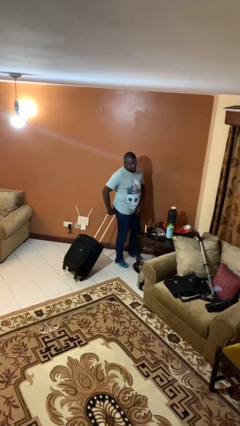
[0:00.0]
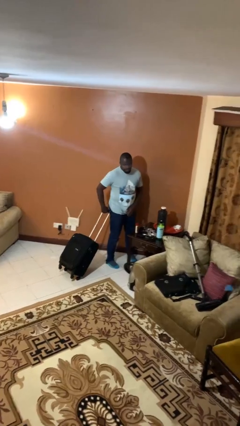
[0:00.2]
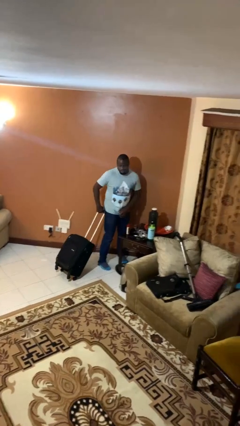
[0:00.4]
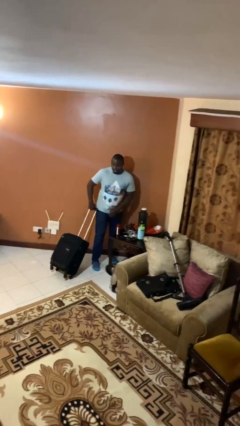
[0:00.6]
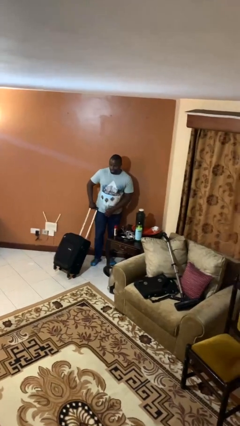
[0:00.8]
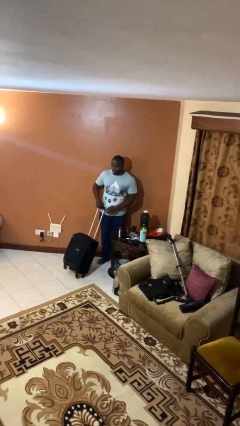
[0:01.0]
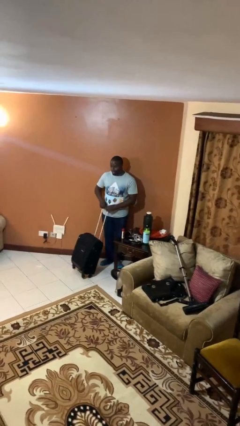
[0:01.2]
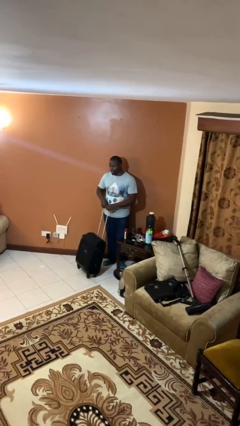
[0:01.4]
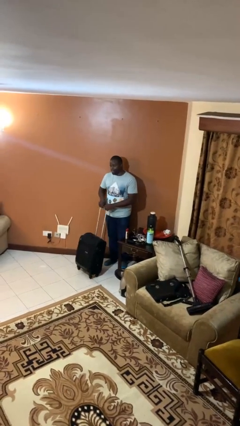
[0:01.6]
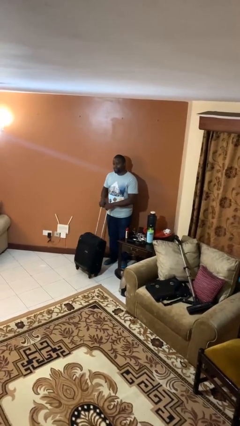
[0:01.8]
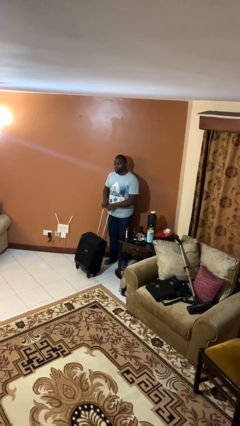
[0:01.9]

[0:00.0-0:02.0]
person pulls wheeled cart

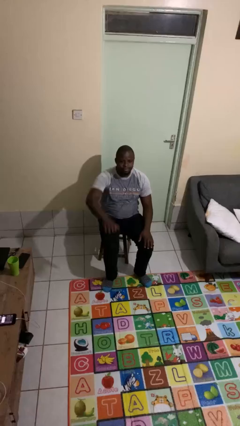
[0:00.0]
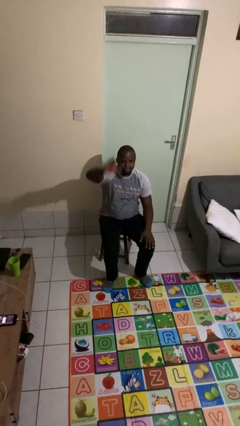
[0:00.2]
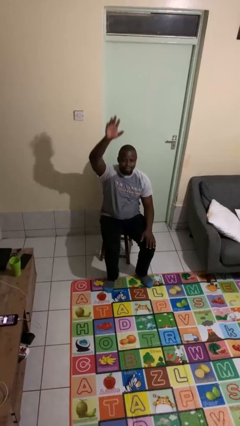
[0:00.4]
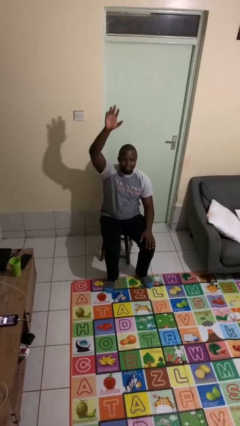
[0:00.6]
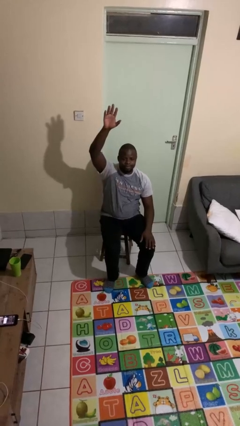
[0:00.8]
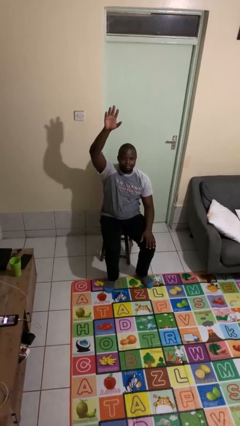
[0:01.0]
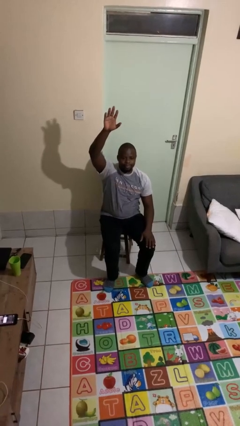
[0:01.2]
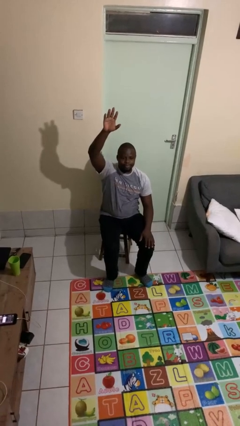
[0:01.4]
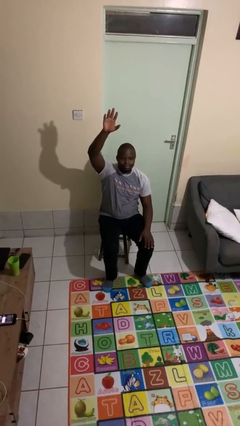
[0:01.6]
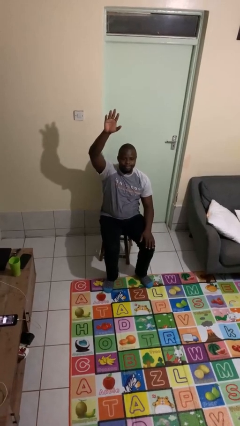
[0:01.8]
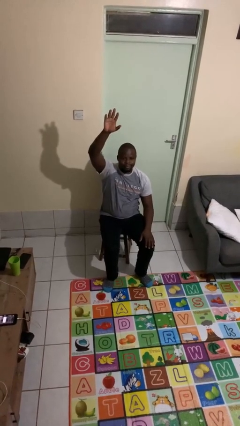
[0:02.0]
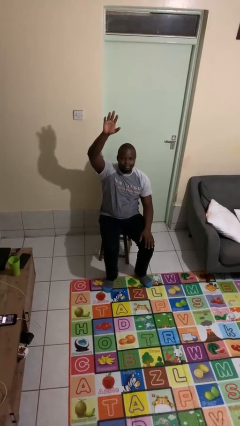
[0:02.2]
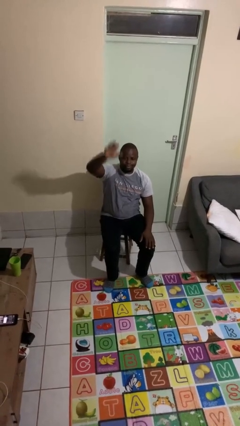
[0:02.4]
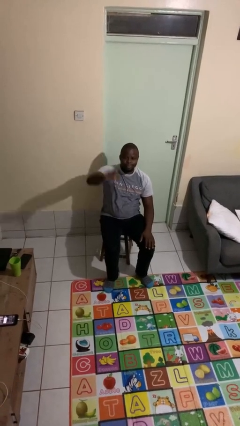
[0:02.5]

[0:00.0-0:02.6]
person gestures raise hand

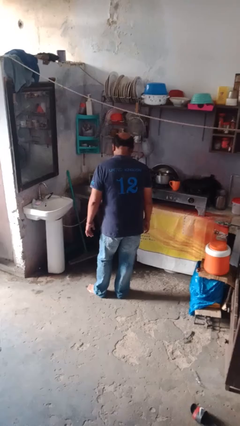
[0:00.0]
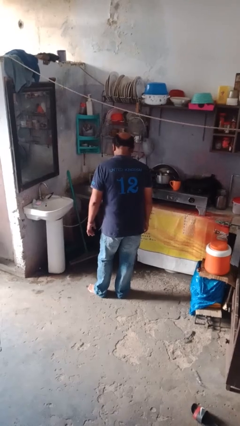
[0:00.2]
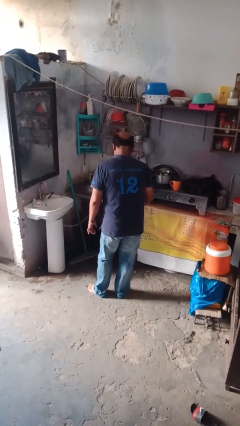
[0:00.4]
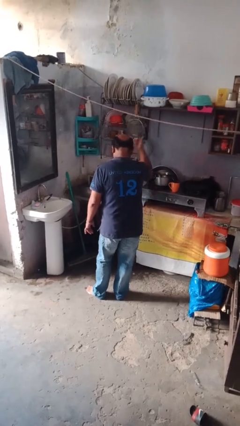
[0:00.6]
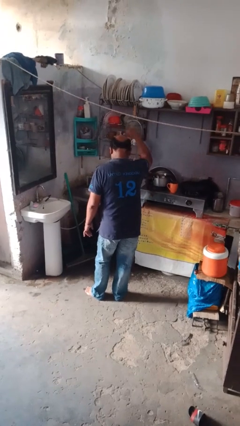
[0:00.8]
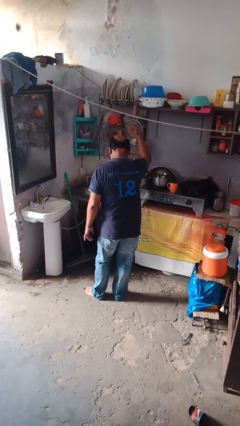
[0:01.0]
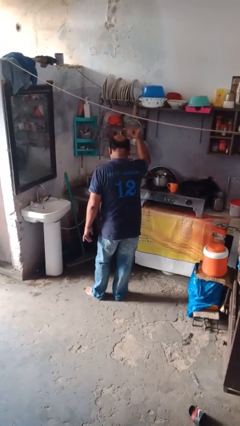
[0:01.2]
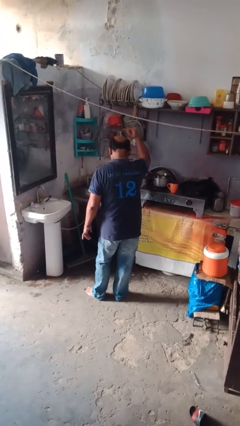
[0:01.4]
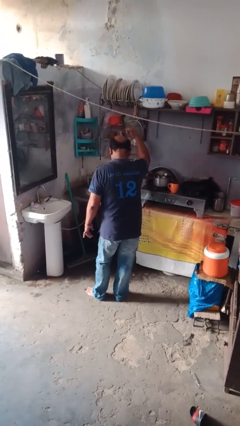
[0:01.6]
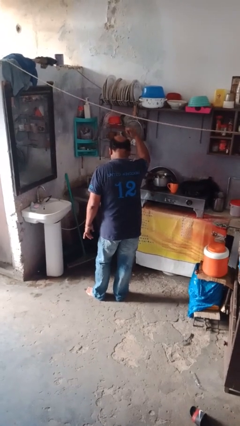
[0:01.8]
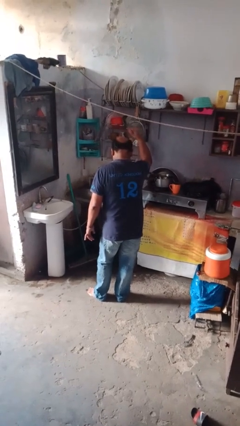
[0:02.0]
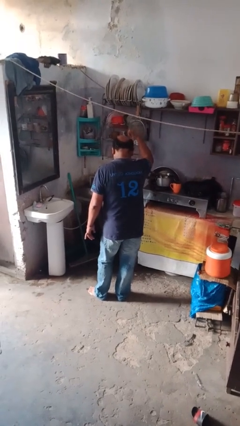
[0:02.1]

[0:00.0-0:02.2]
person gestures hang loose

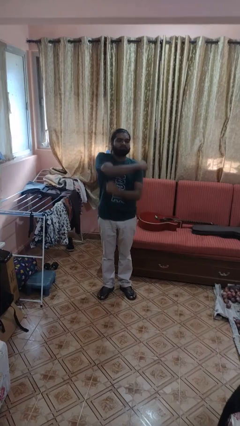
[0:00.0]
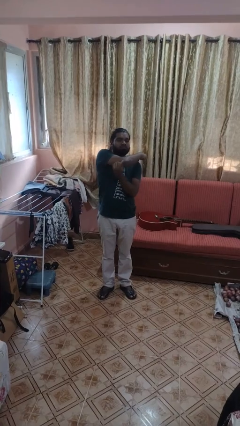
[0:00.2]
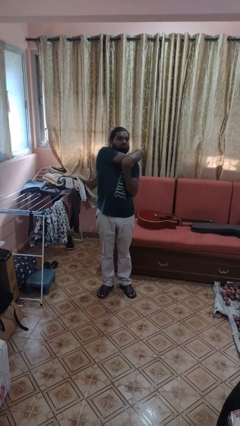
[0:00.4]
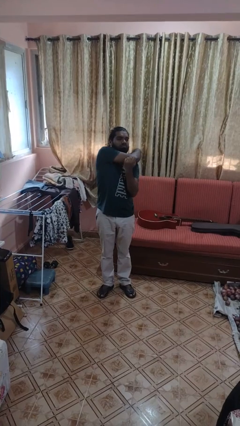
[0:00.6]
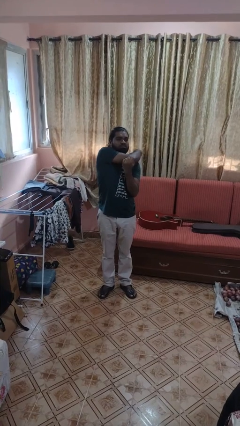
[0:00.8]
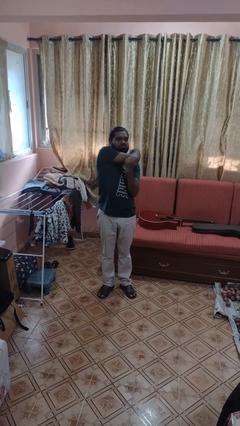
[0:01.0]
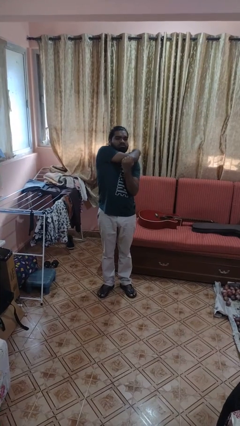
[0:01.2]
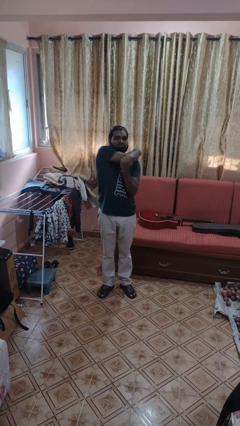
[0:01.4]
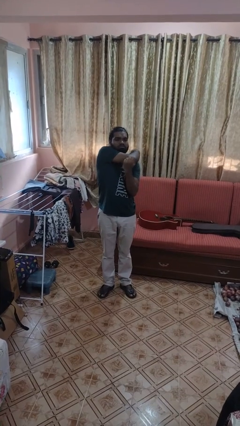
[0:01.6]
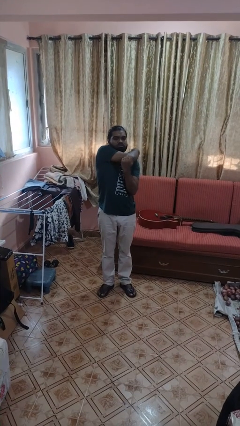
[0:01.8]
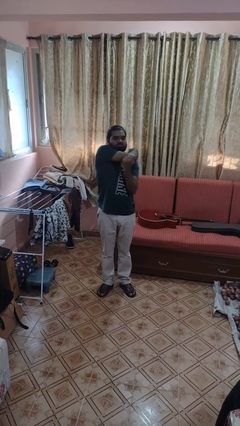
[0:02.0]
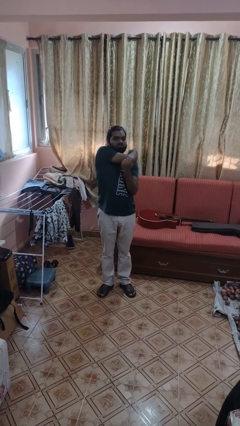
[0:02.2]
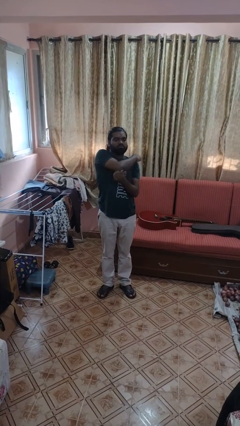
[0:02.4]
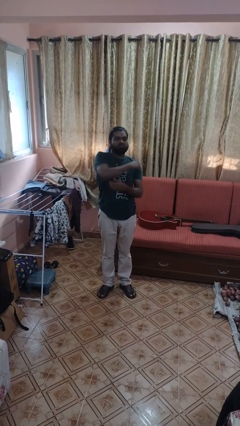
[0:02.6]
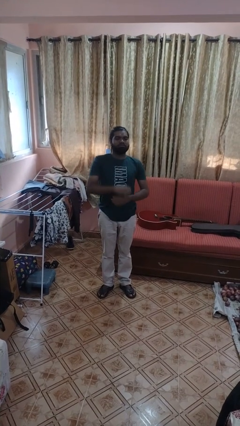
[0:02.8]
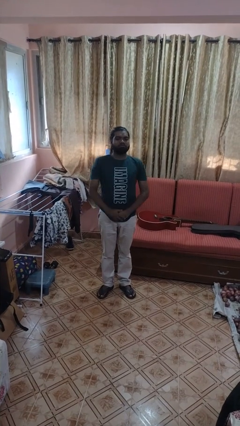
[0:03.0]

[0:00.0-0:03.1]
person stretches arms to side

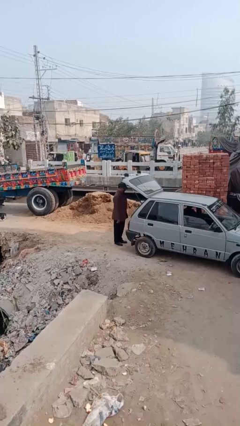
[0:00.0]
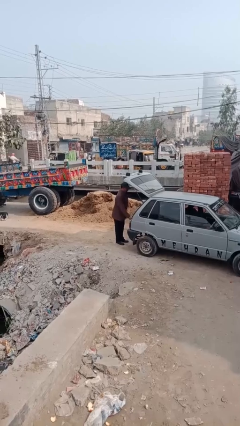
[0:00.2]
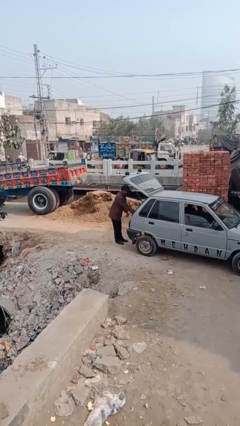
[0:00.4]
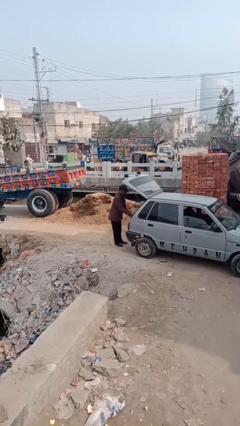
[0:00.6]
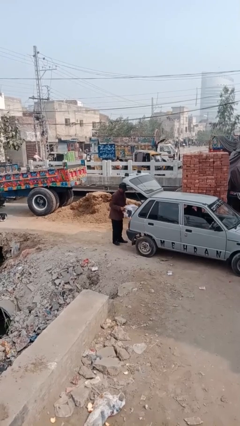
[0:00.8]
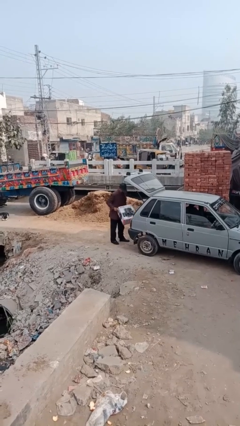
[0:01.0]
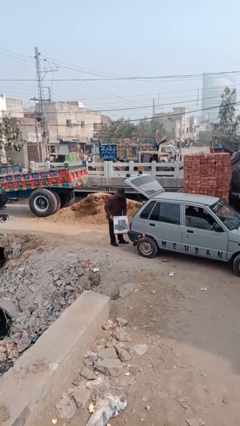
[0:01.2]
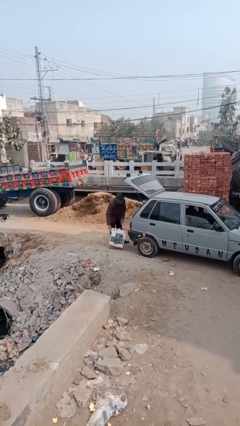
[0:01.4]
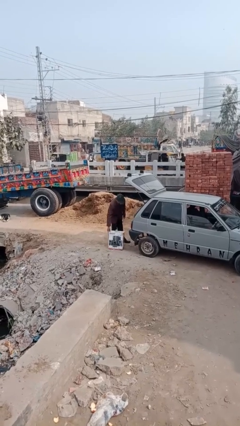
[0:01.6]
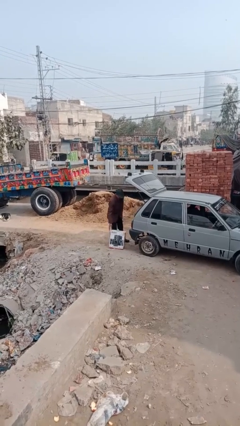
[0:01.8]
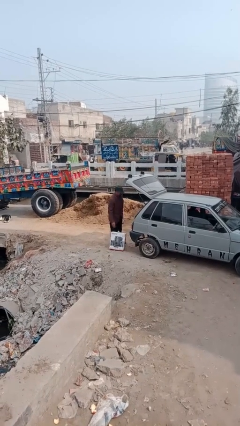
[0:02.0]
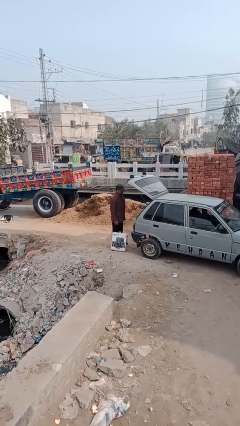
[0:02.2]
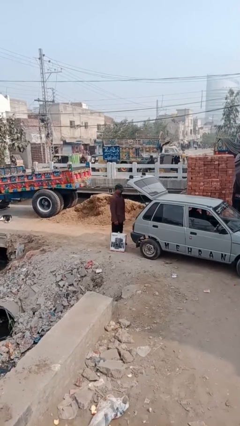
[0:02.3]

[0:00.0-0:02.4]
person unloads car

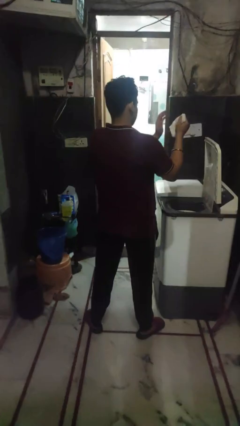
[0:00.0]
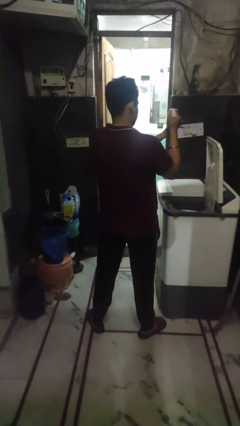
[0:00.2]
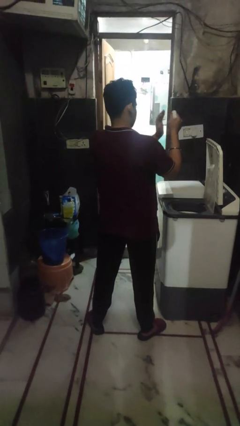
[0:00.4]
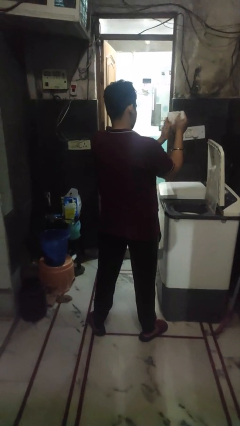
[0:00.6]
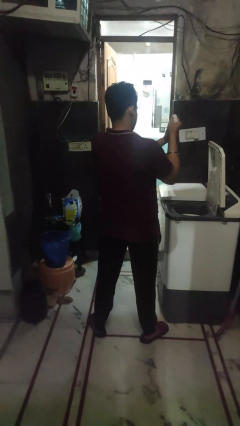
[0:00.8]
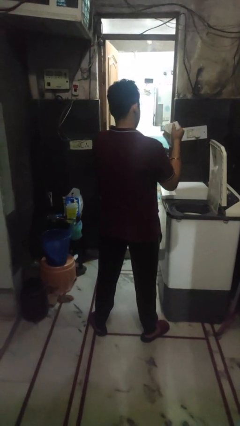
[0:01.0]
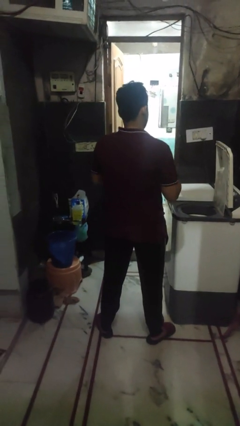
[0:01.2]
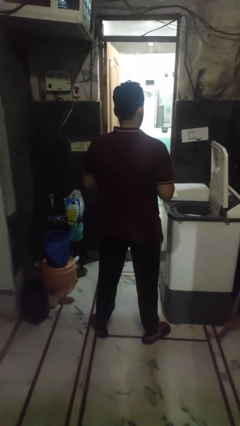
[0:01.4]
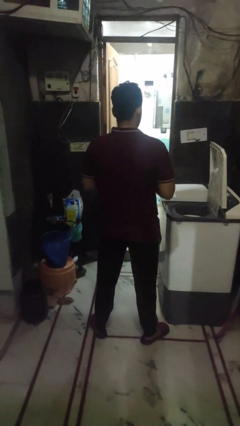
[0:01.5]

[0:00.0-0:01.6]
person cleans dryer lint trap

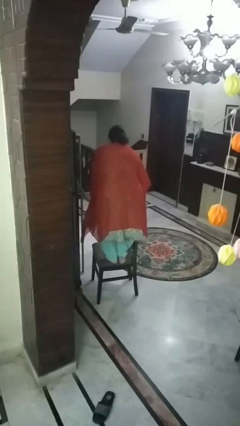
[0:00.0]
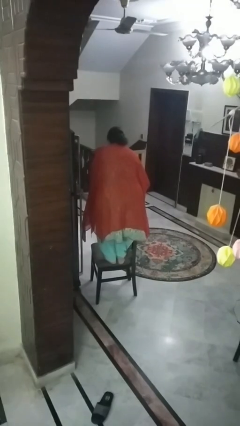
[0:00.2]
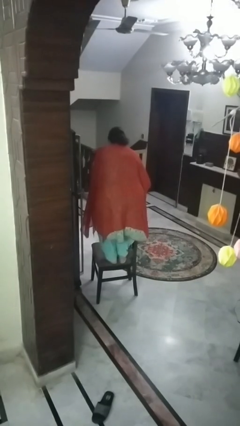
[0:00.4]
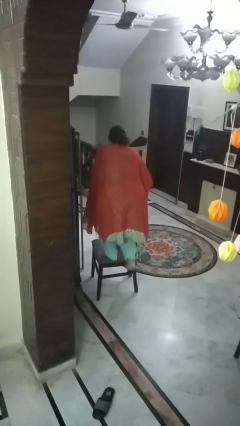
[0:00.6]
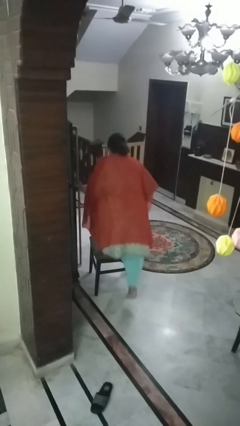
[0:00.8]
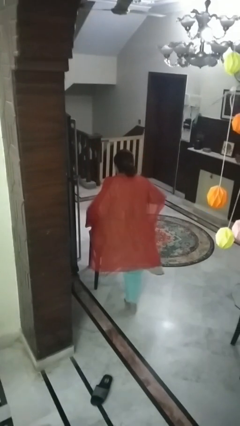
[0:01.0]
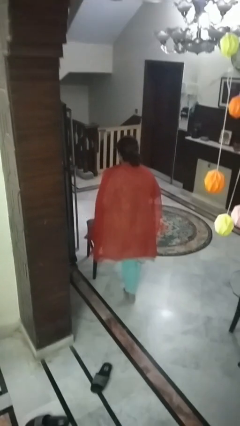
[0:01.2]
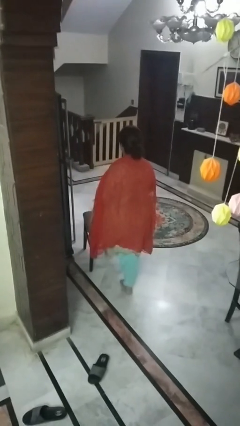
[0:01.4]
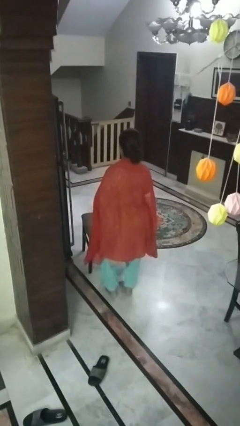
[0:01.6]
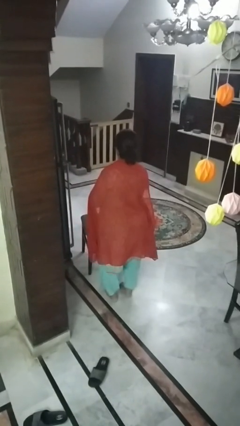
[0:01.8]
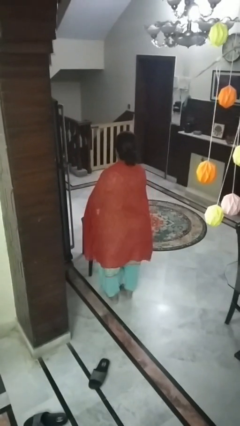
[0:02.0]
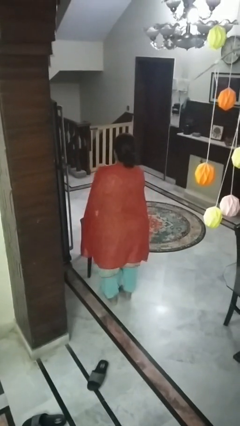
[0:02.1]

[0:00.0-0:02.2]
person climbs off chair

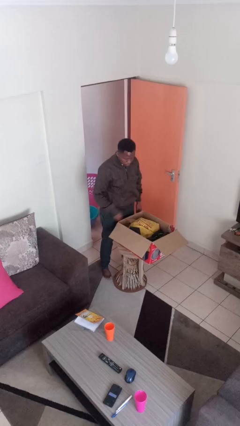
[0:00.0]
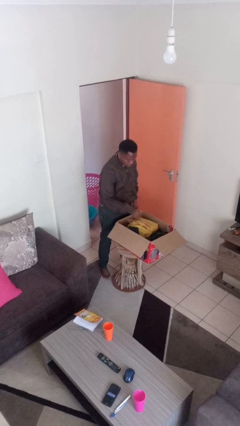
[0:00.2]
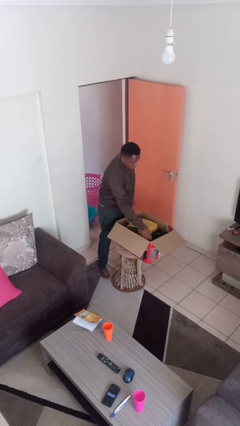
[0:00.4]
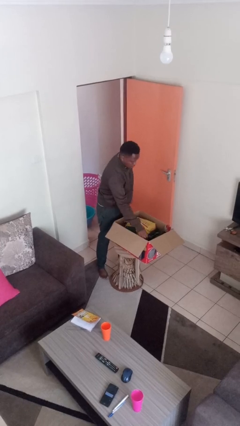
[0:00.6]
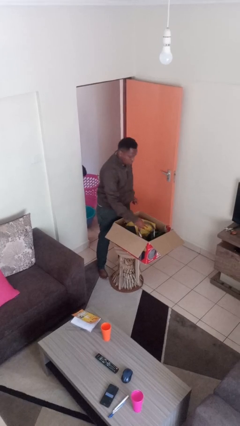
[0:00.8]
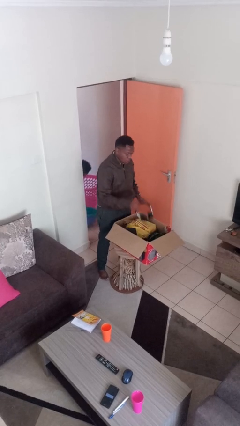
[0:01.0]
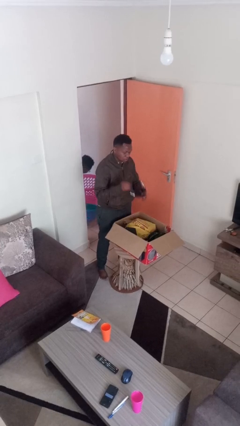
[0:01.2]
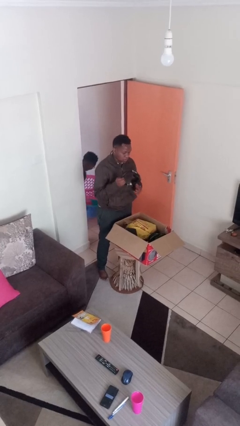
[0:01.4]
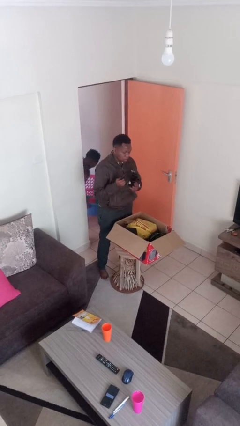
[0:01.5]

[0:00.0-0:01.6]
person takes object from box
